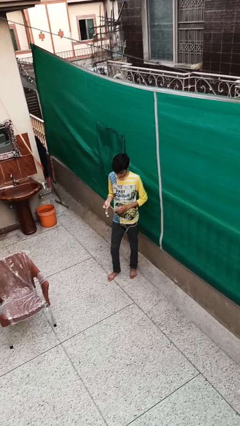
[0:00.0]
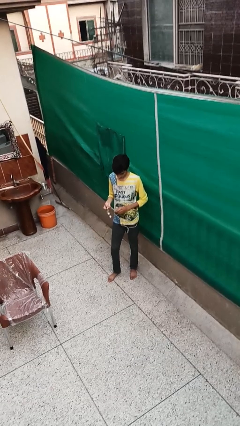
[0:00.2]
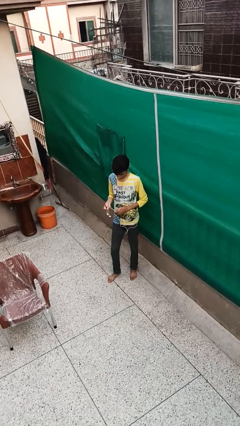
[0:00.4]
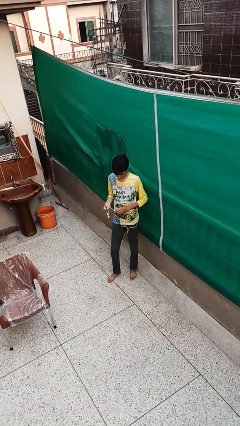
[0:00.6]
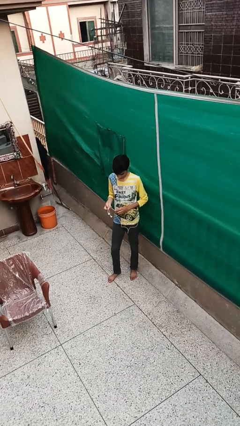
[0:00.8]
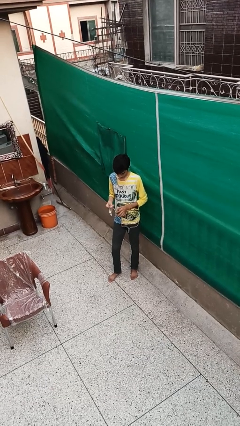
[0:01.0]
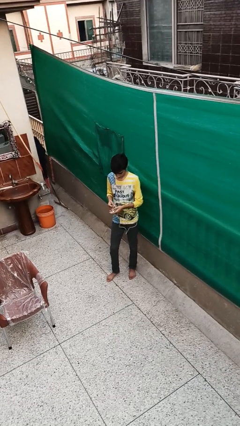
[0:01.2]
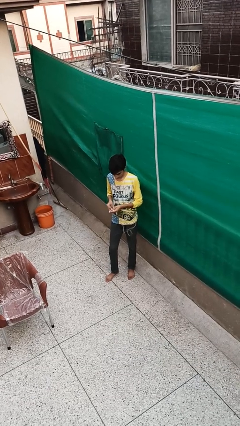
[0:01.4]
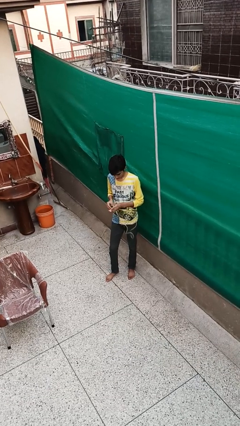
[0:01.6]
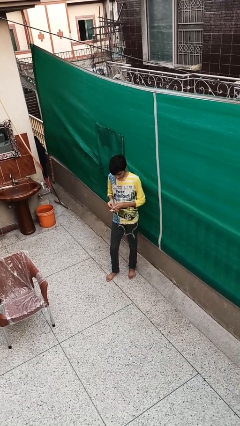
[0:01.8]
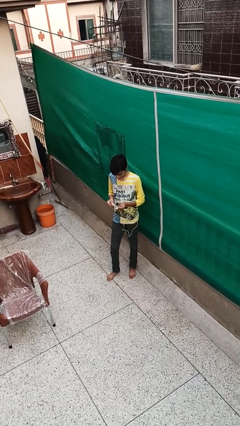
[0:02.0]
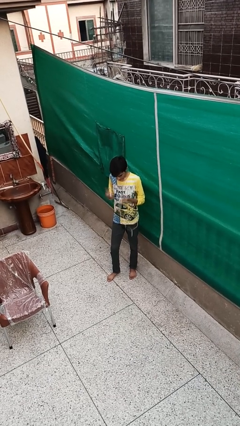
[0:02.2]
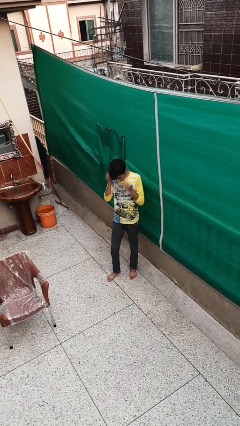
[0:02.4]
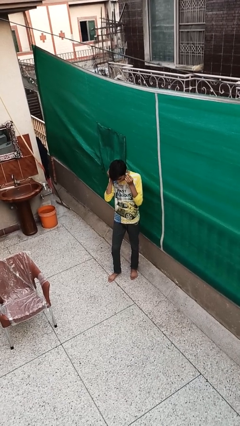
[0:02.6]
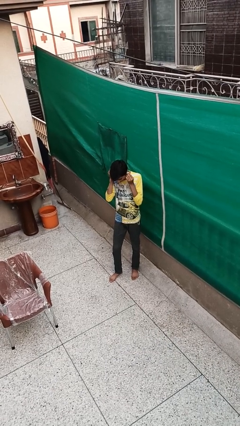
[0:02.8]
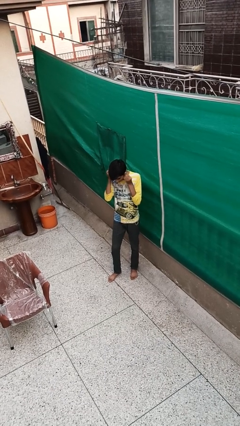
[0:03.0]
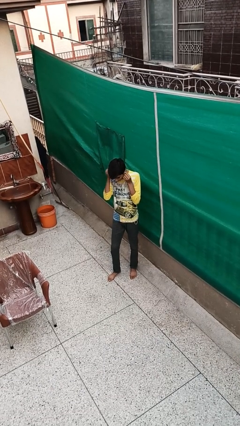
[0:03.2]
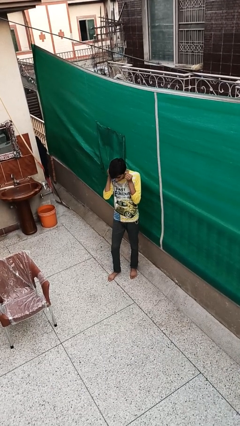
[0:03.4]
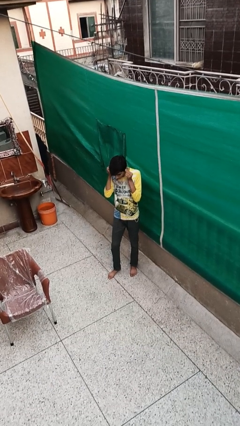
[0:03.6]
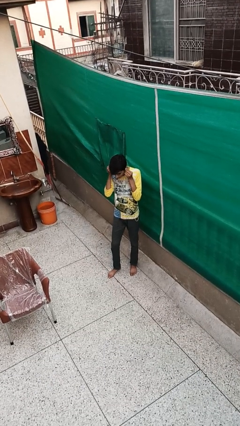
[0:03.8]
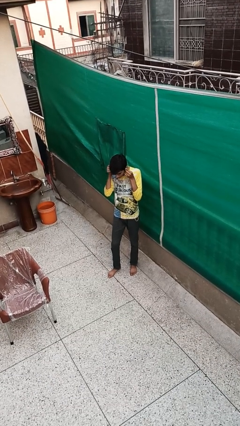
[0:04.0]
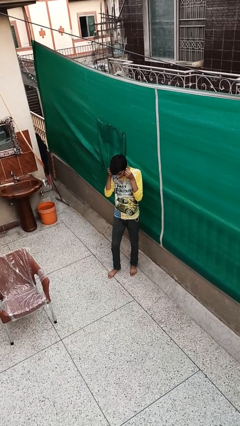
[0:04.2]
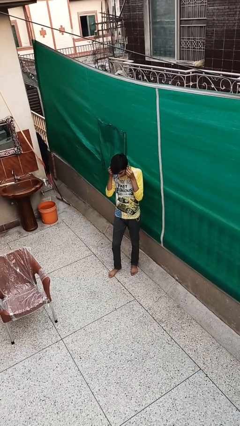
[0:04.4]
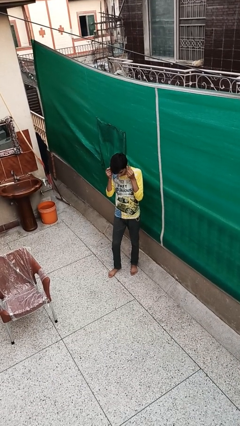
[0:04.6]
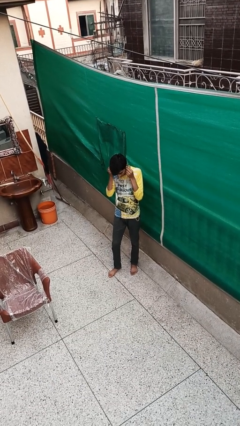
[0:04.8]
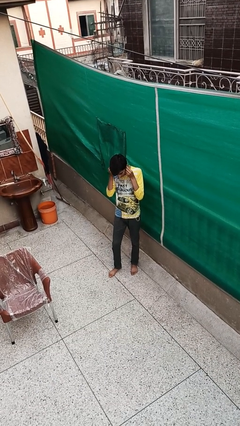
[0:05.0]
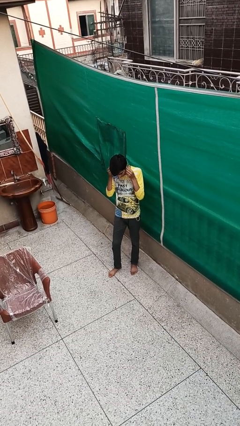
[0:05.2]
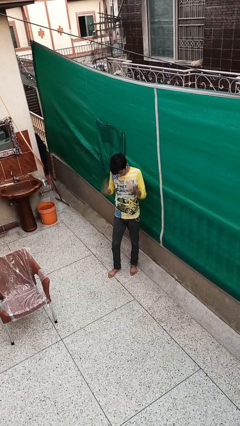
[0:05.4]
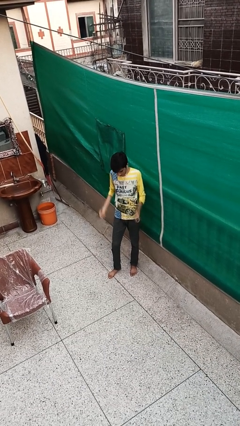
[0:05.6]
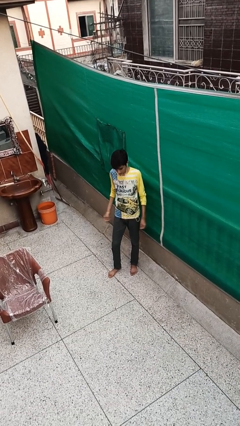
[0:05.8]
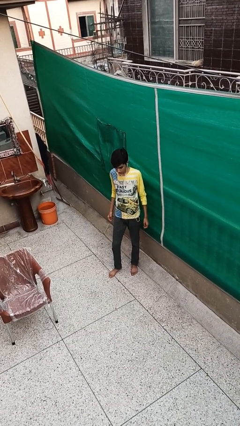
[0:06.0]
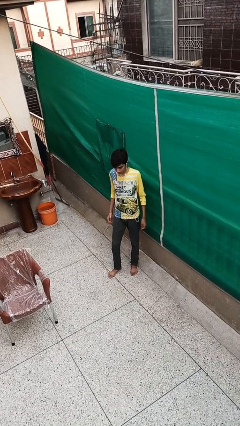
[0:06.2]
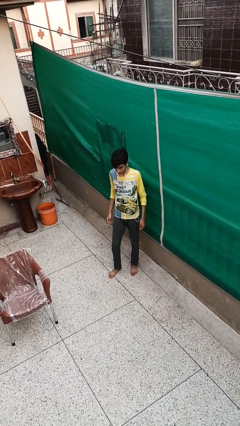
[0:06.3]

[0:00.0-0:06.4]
person puts on headphones

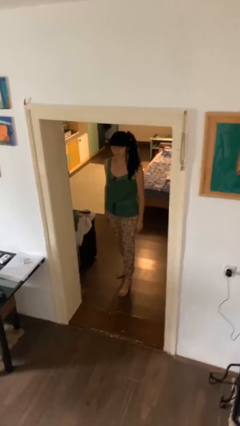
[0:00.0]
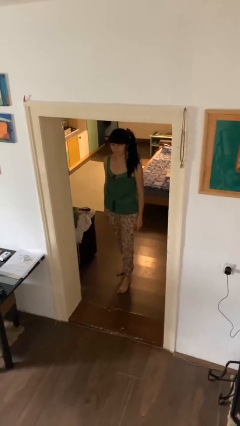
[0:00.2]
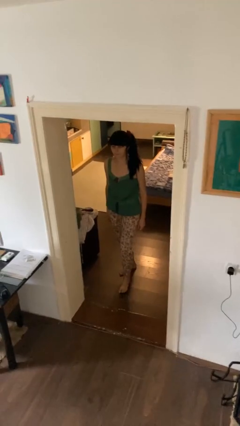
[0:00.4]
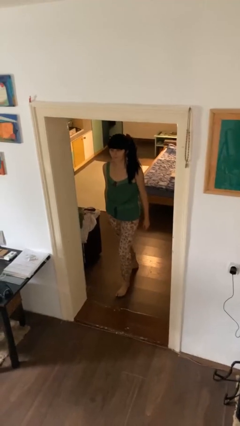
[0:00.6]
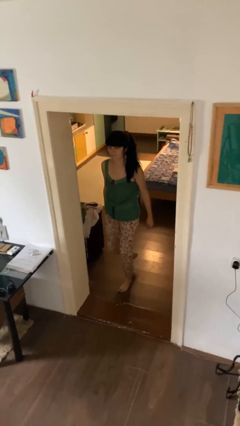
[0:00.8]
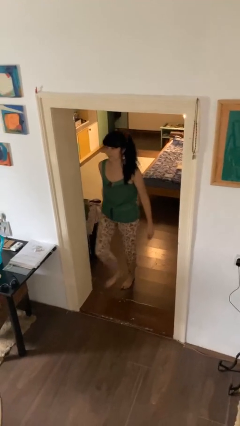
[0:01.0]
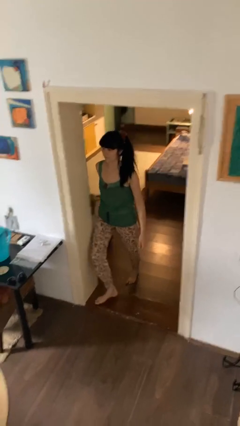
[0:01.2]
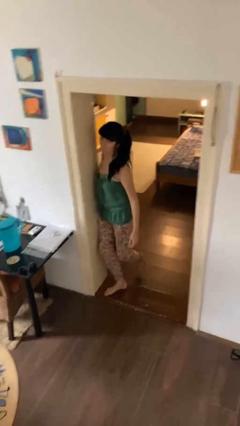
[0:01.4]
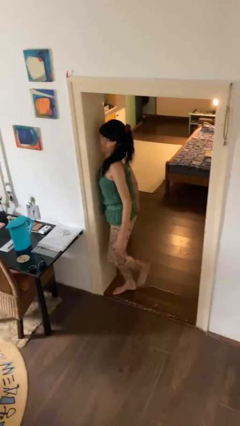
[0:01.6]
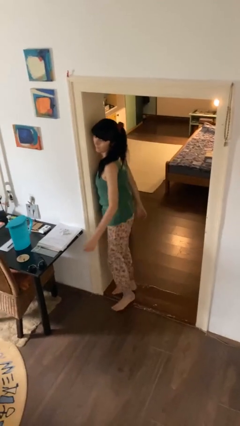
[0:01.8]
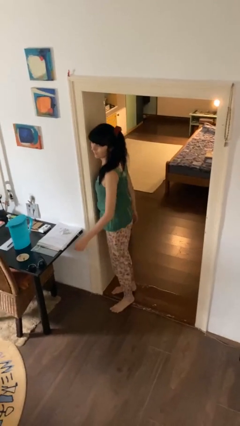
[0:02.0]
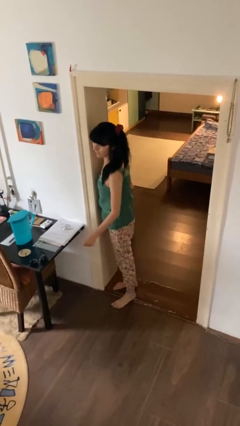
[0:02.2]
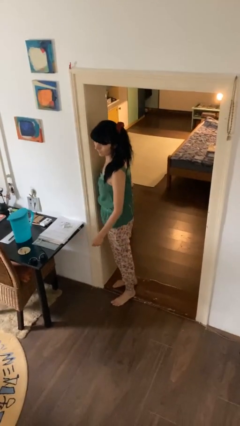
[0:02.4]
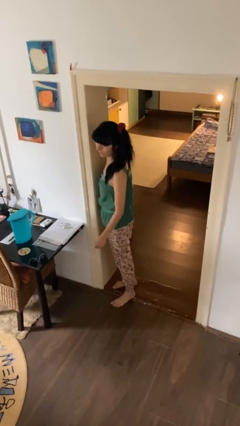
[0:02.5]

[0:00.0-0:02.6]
person bumps into wall

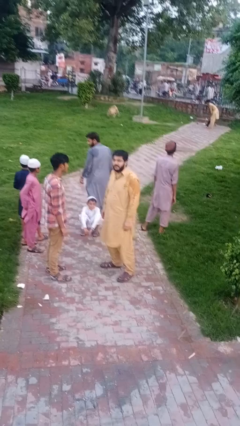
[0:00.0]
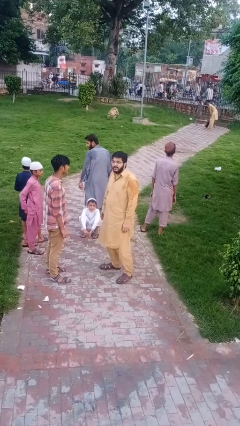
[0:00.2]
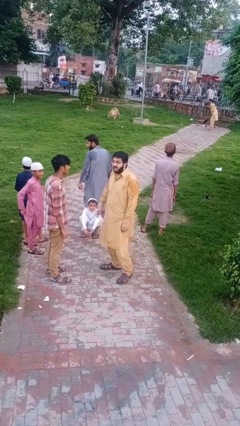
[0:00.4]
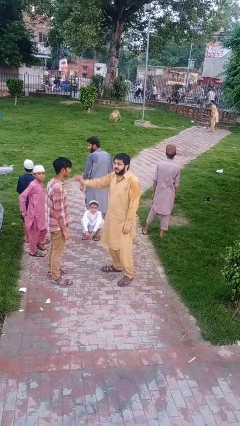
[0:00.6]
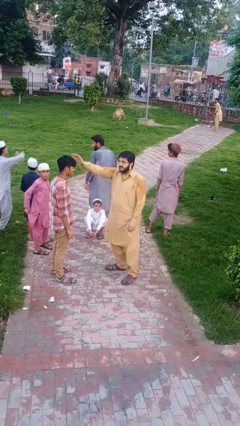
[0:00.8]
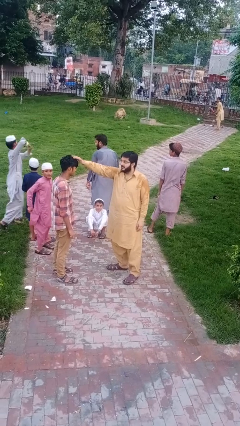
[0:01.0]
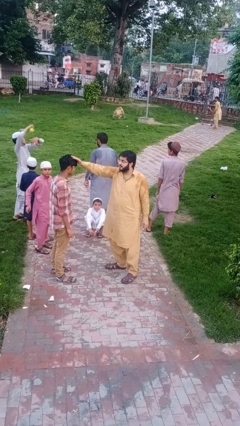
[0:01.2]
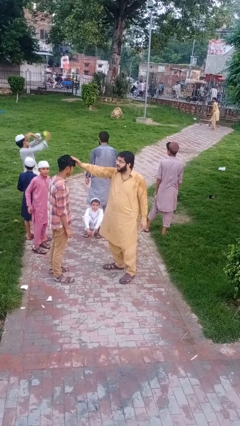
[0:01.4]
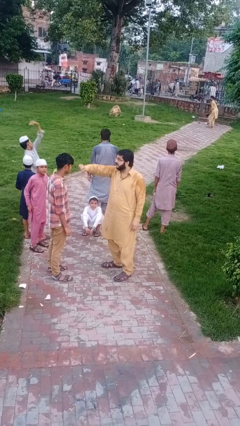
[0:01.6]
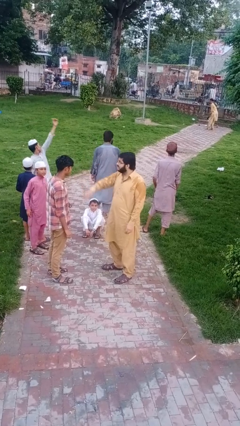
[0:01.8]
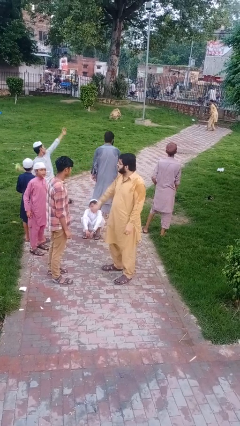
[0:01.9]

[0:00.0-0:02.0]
person grabs person by hair

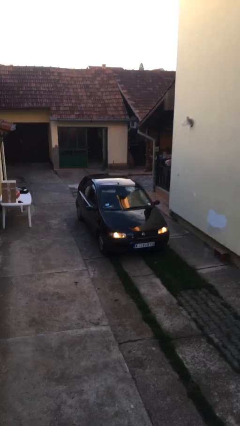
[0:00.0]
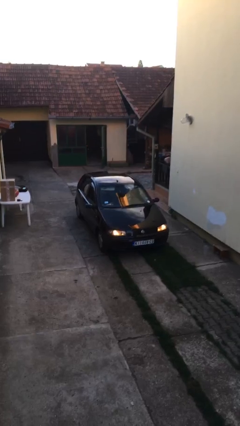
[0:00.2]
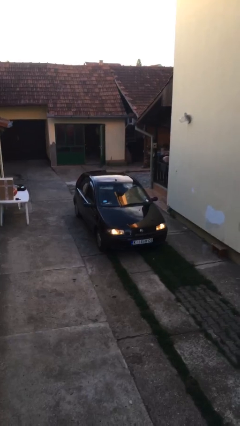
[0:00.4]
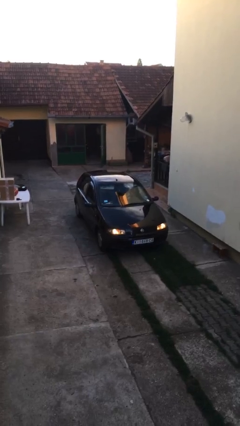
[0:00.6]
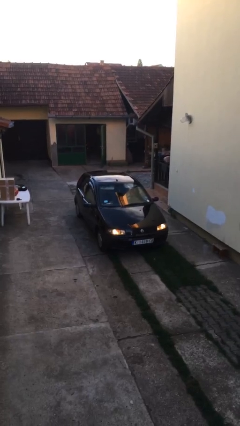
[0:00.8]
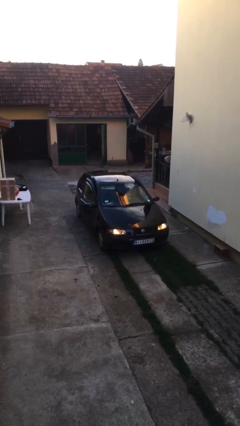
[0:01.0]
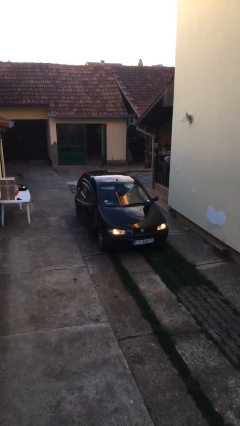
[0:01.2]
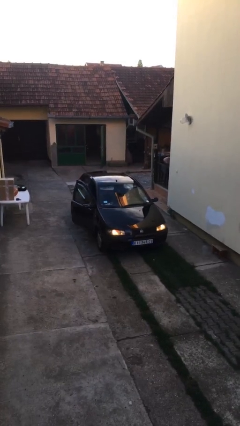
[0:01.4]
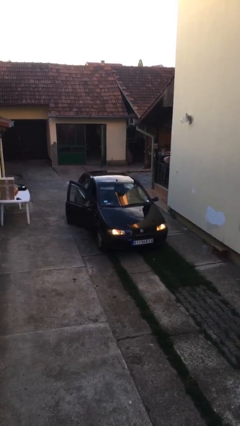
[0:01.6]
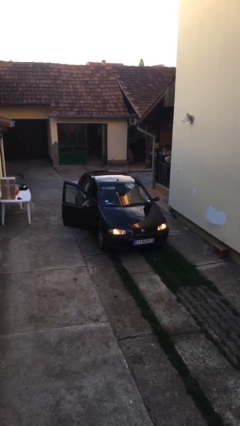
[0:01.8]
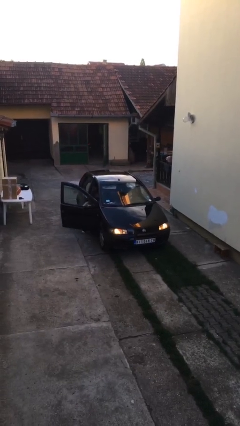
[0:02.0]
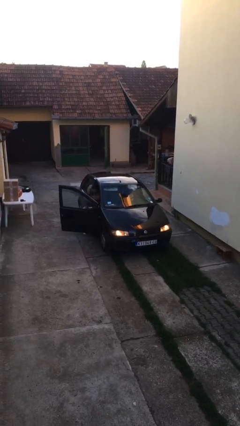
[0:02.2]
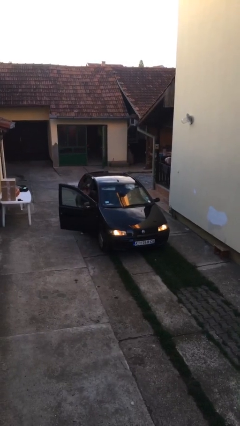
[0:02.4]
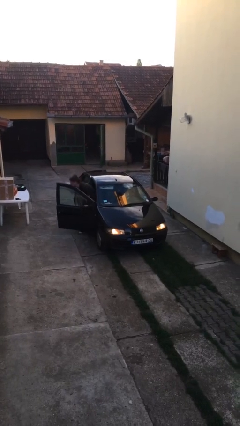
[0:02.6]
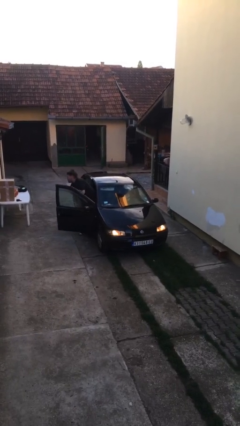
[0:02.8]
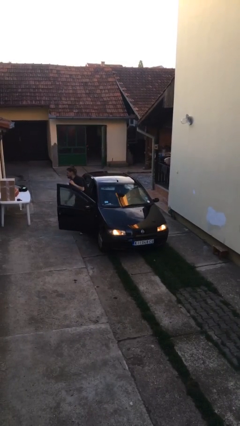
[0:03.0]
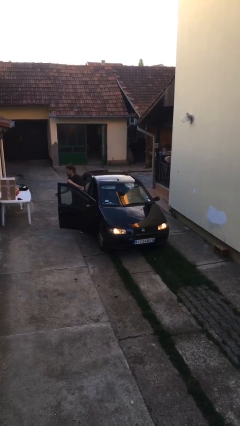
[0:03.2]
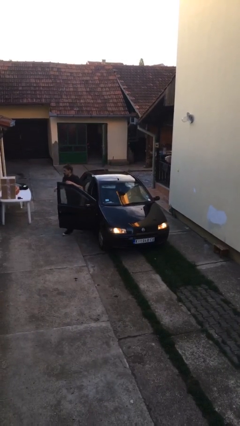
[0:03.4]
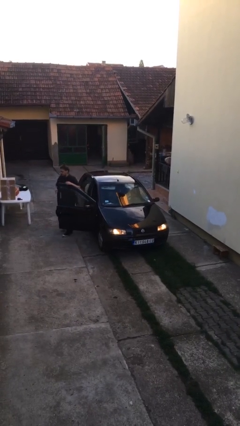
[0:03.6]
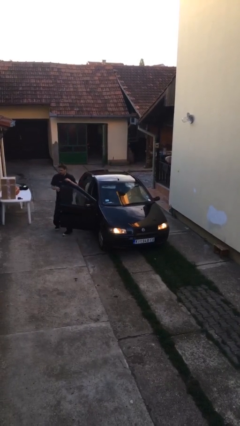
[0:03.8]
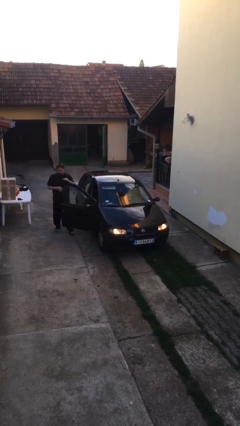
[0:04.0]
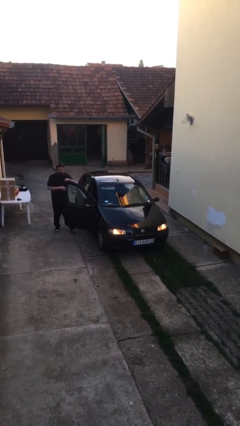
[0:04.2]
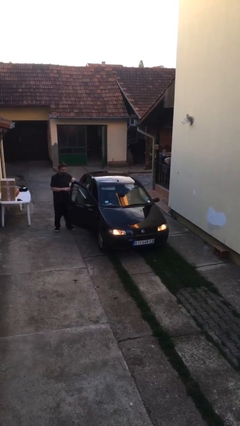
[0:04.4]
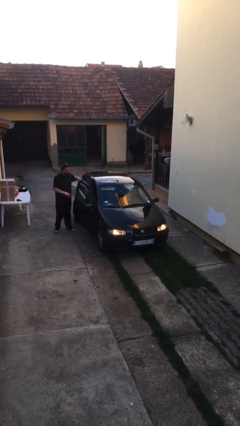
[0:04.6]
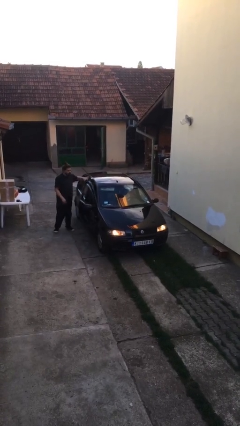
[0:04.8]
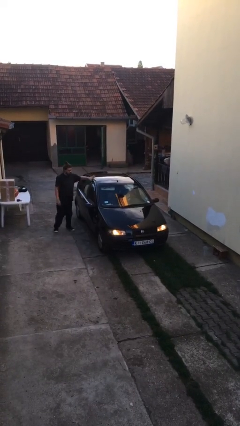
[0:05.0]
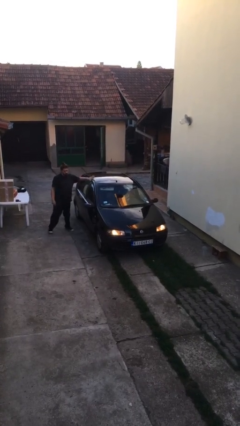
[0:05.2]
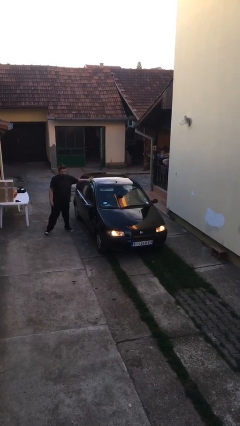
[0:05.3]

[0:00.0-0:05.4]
car drops off person

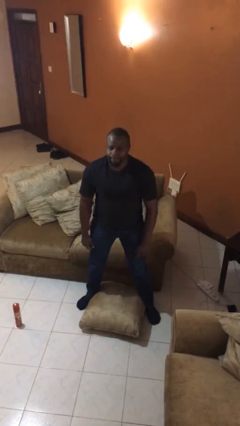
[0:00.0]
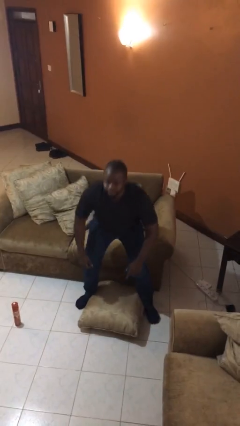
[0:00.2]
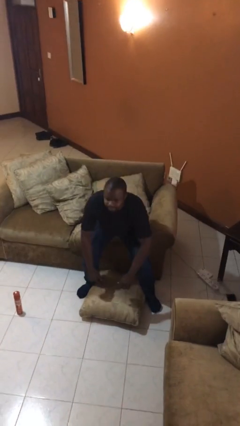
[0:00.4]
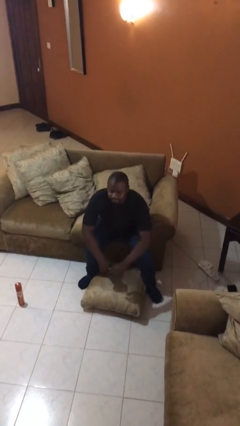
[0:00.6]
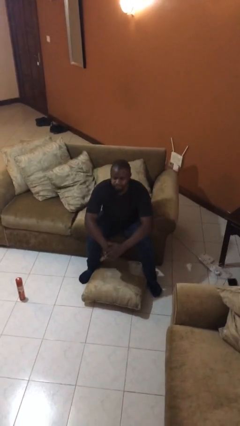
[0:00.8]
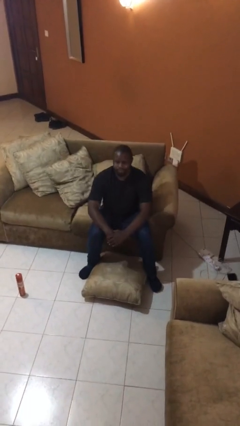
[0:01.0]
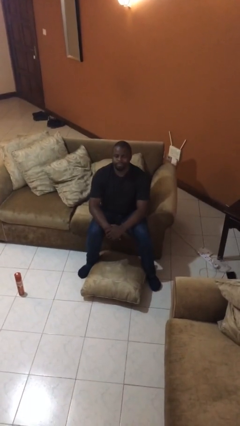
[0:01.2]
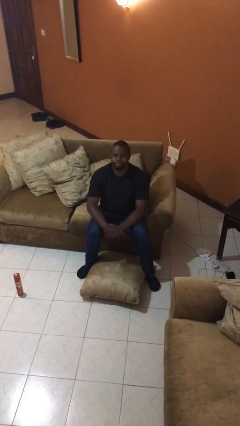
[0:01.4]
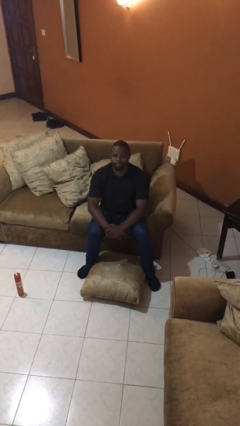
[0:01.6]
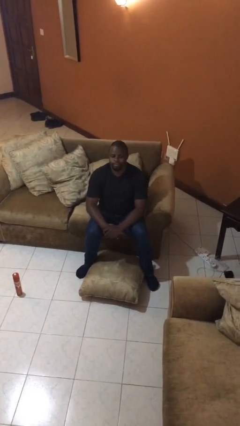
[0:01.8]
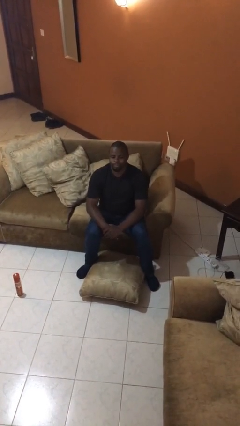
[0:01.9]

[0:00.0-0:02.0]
person sits down
